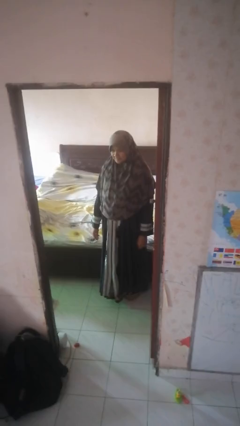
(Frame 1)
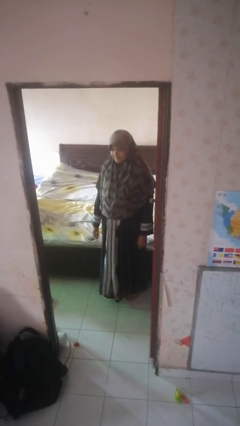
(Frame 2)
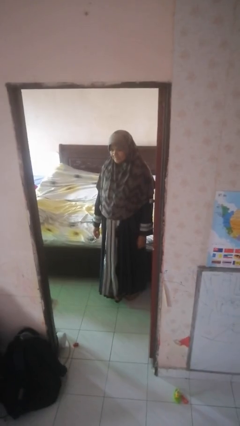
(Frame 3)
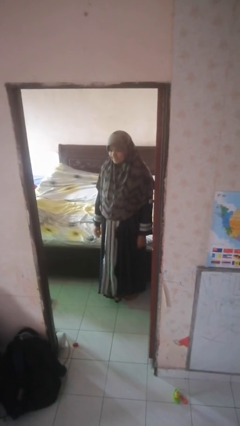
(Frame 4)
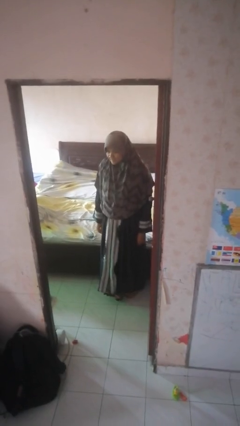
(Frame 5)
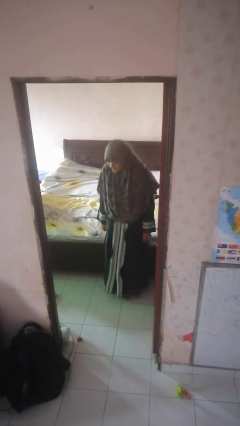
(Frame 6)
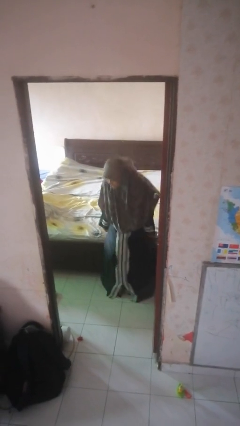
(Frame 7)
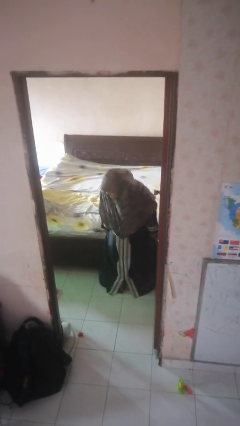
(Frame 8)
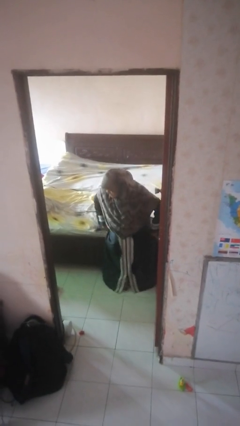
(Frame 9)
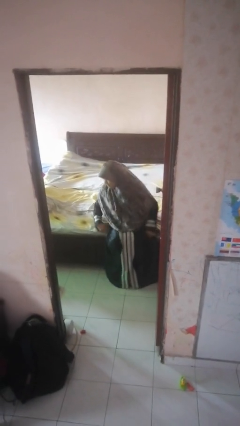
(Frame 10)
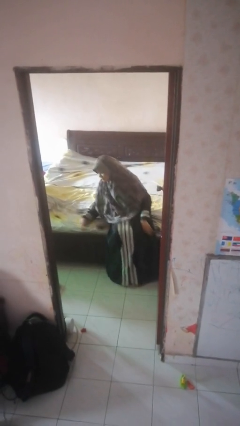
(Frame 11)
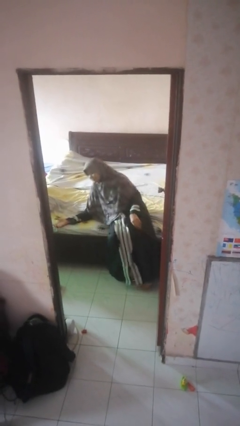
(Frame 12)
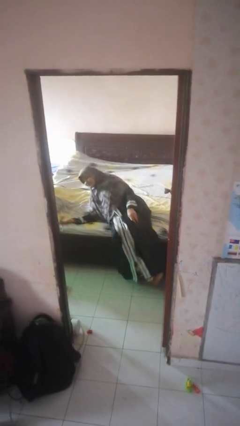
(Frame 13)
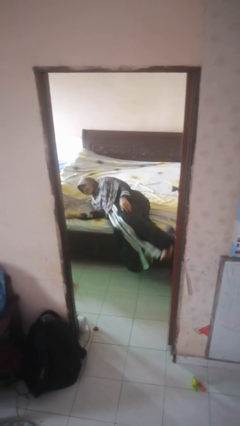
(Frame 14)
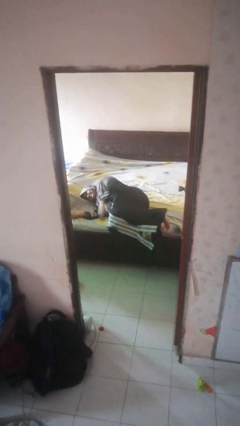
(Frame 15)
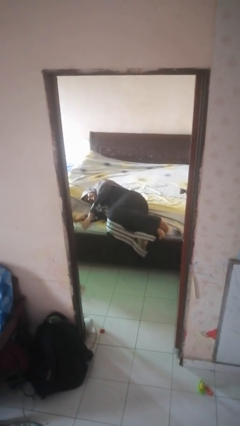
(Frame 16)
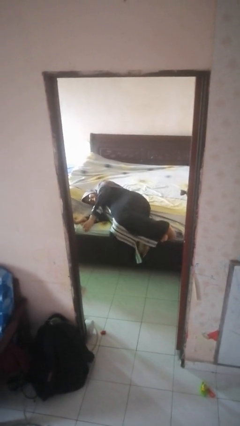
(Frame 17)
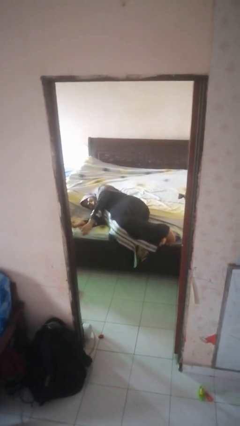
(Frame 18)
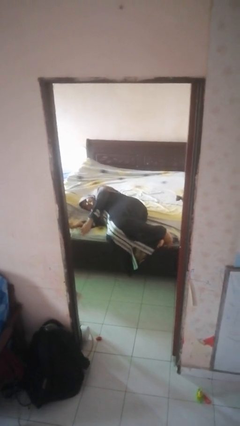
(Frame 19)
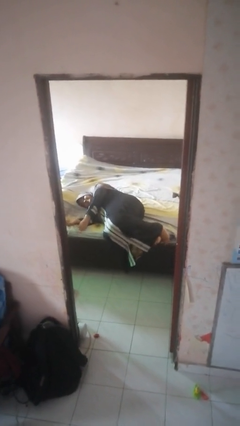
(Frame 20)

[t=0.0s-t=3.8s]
person lies down on bed

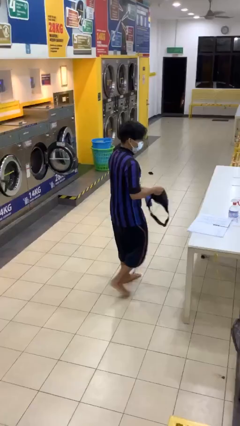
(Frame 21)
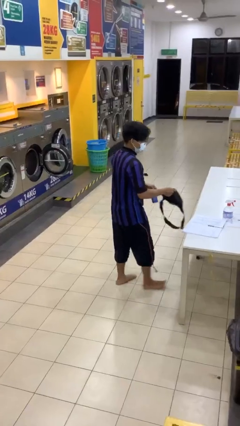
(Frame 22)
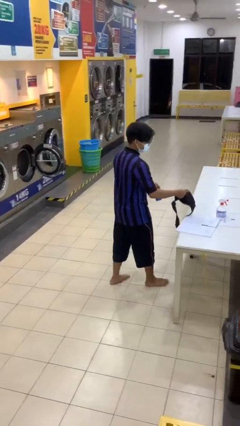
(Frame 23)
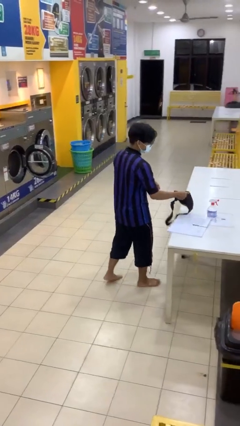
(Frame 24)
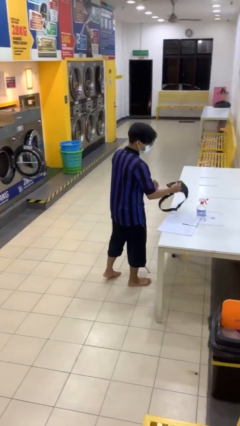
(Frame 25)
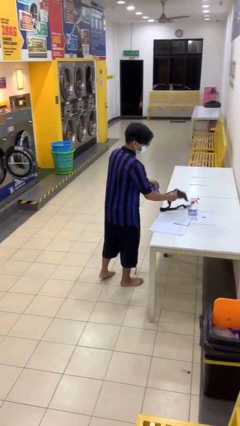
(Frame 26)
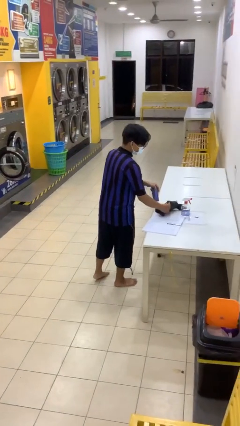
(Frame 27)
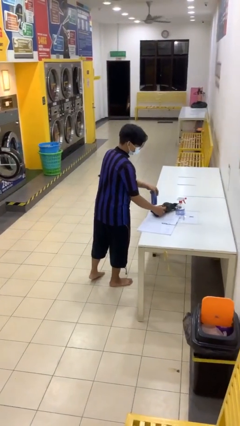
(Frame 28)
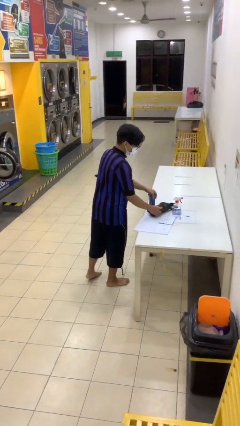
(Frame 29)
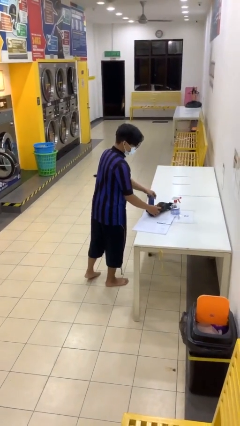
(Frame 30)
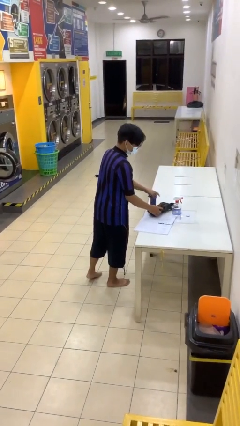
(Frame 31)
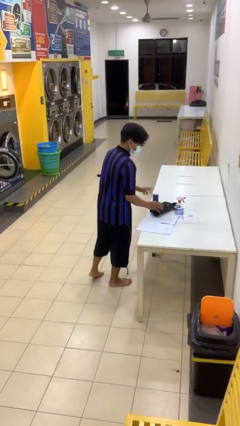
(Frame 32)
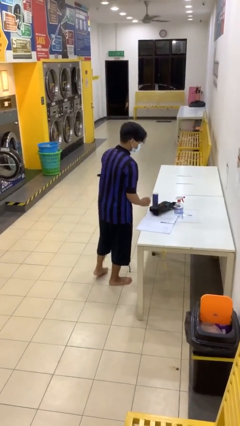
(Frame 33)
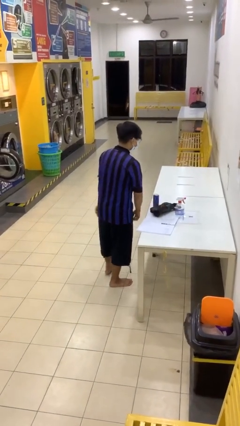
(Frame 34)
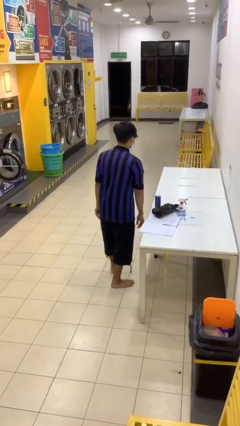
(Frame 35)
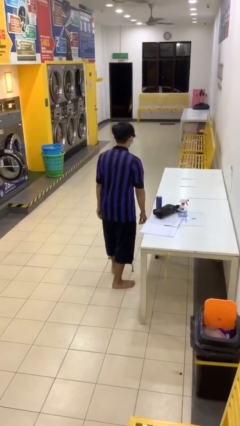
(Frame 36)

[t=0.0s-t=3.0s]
person puts down object on table

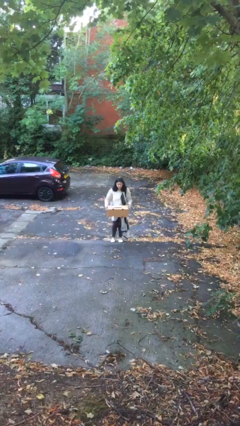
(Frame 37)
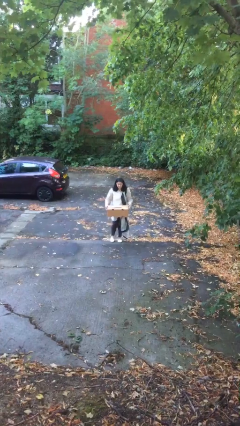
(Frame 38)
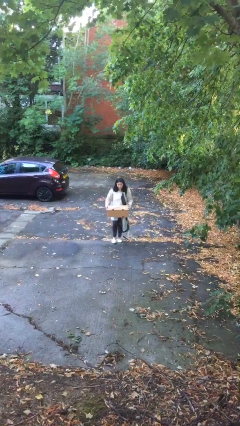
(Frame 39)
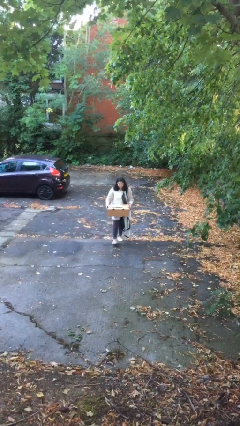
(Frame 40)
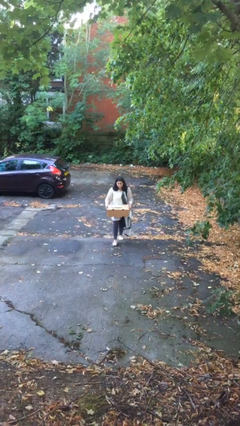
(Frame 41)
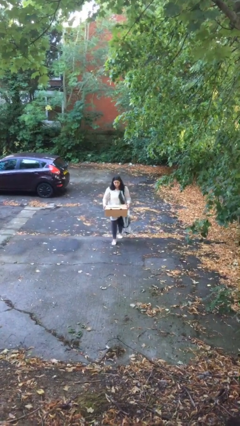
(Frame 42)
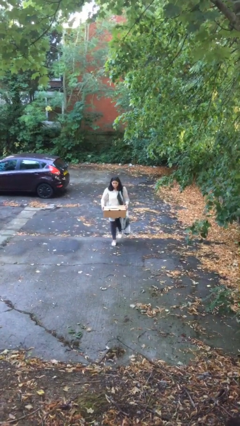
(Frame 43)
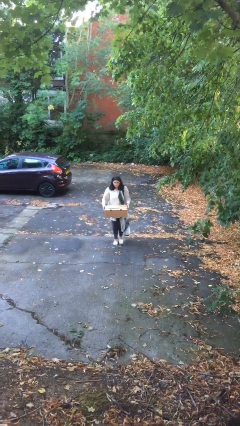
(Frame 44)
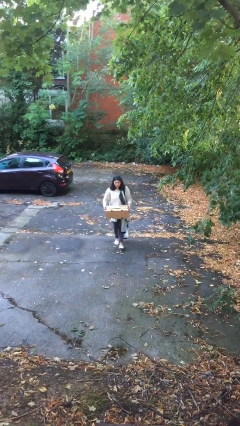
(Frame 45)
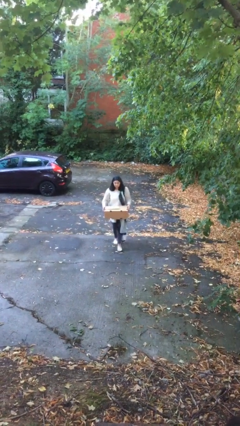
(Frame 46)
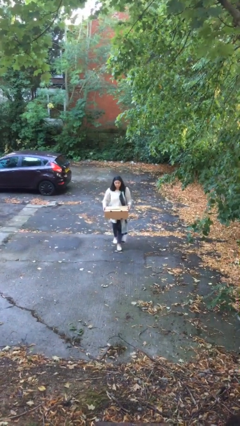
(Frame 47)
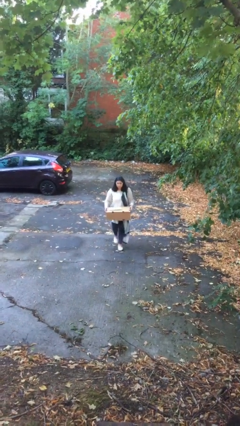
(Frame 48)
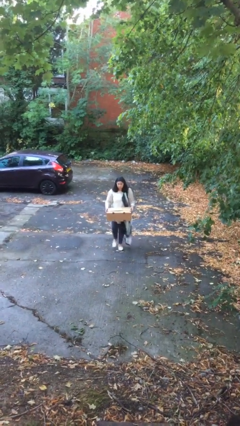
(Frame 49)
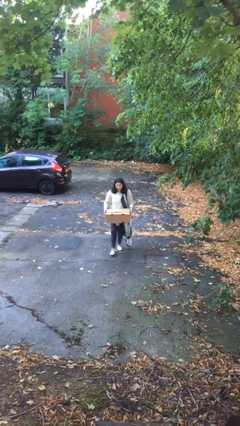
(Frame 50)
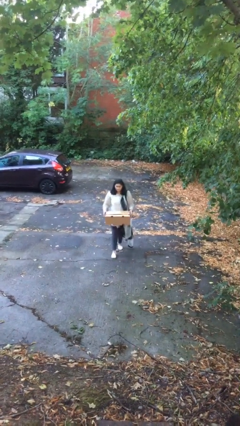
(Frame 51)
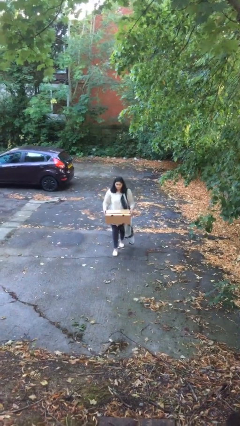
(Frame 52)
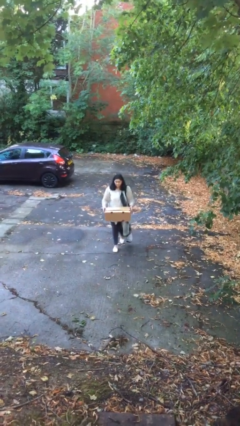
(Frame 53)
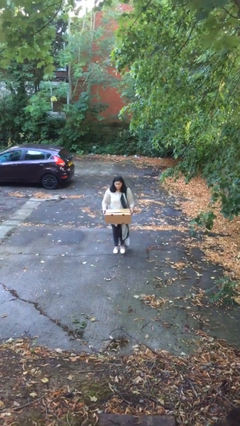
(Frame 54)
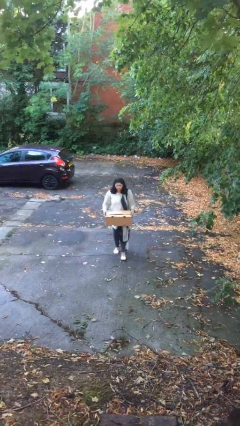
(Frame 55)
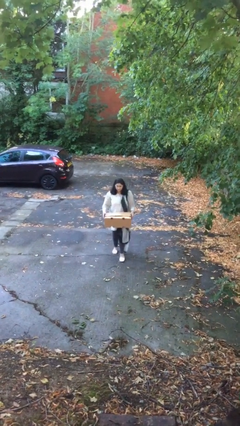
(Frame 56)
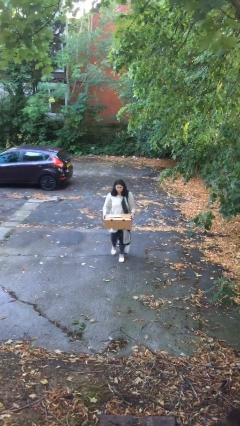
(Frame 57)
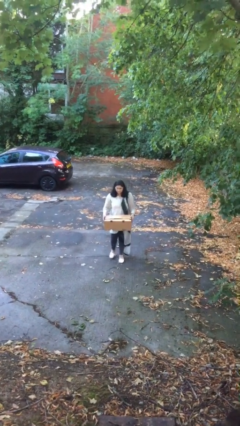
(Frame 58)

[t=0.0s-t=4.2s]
person carries heavy object

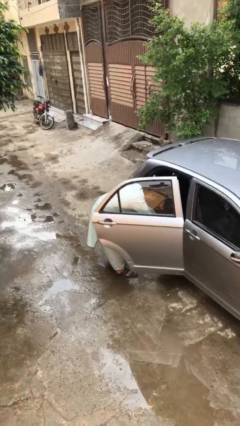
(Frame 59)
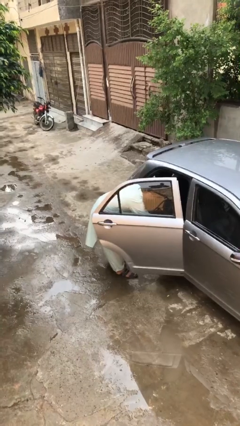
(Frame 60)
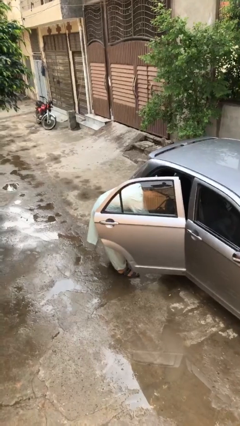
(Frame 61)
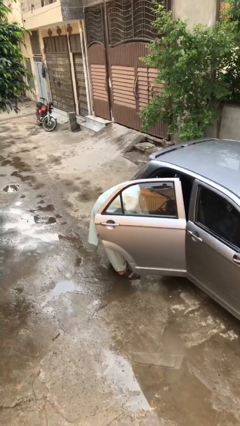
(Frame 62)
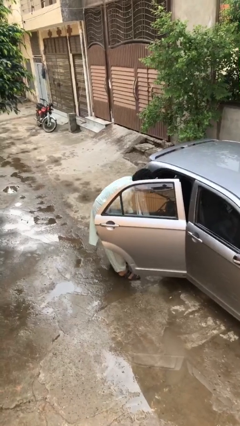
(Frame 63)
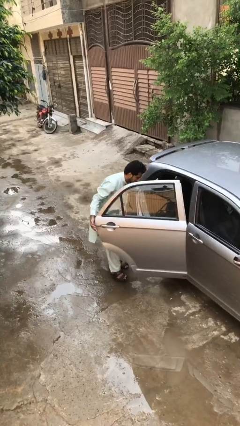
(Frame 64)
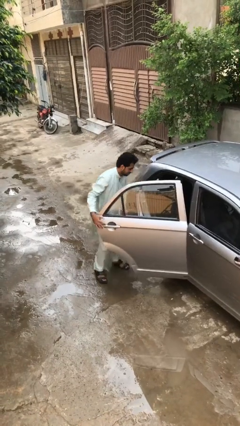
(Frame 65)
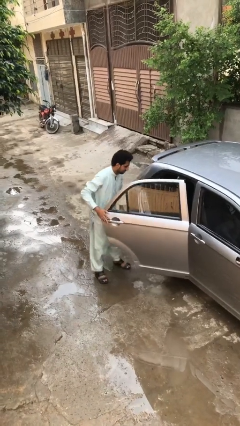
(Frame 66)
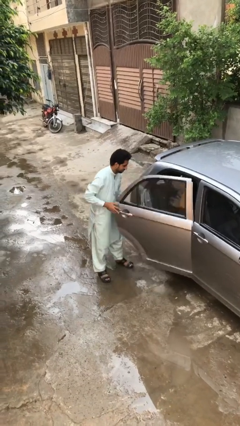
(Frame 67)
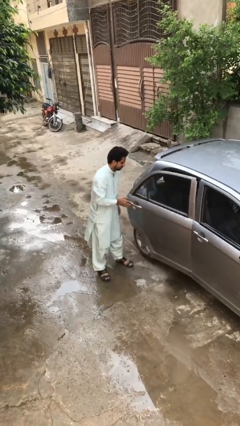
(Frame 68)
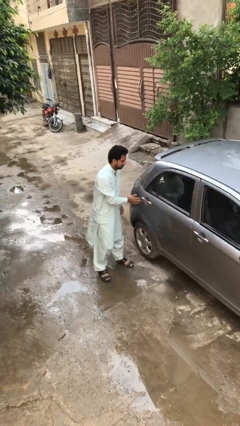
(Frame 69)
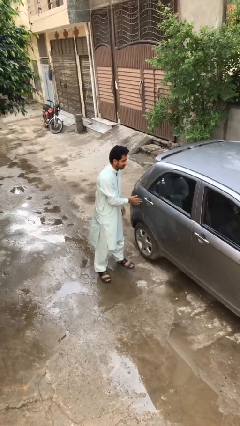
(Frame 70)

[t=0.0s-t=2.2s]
person closes car door

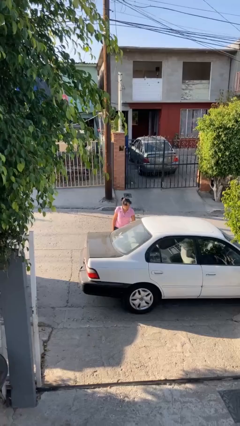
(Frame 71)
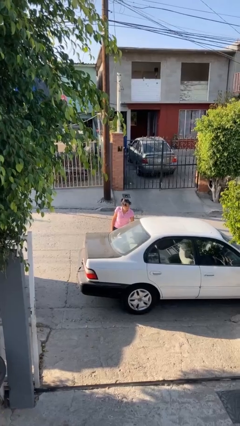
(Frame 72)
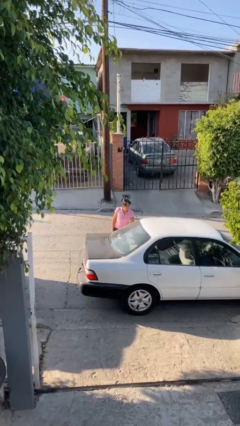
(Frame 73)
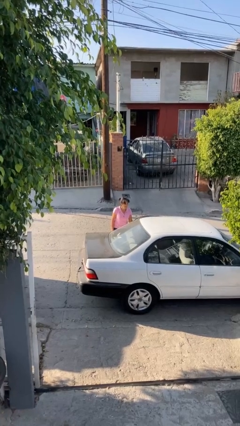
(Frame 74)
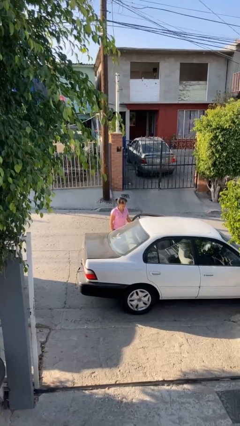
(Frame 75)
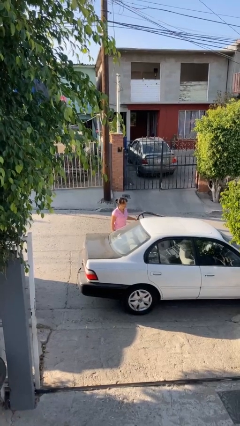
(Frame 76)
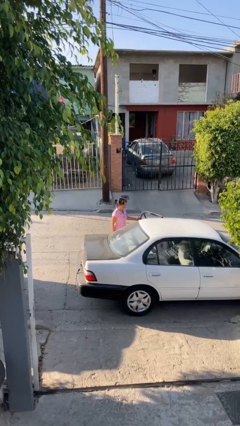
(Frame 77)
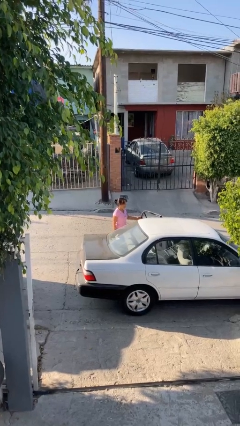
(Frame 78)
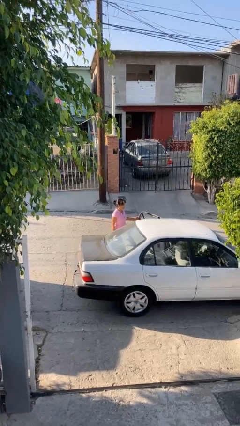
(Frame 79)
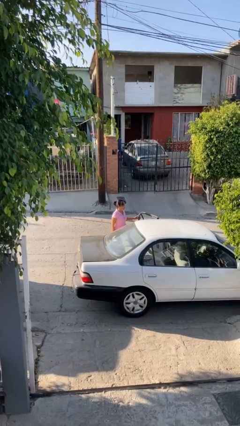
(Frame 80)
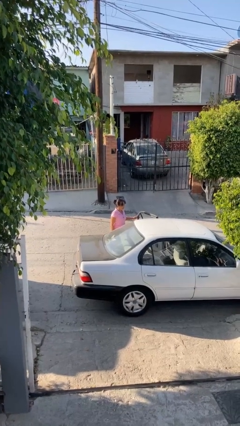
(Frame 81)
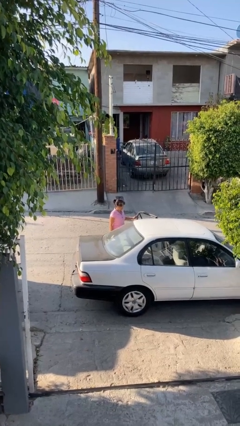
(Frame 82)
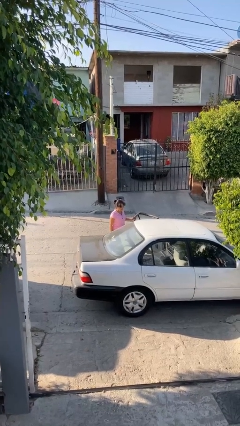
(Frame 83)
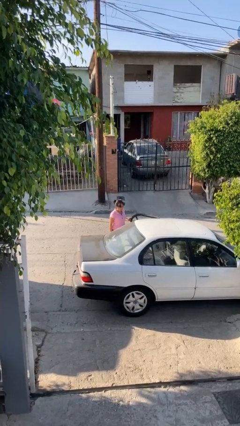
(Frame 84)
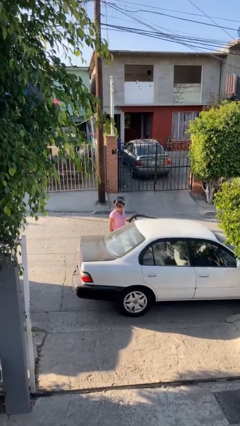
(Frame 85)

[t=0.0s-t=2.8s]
person opens car door

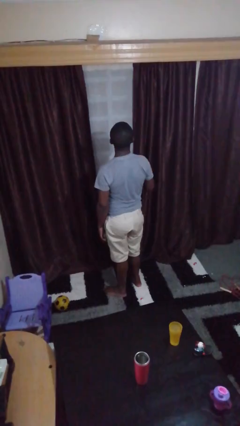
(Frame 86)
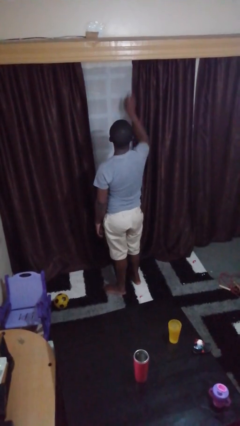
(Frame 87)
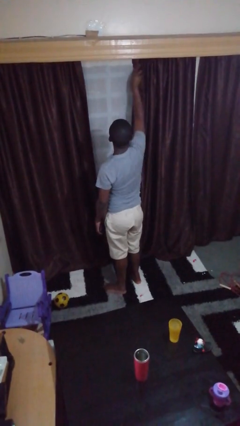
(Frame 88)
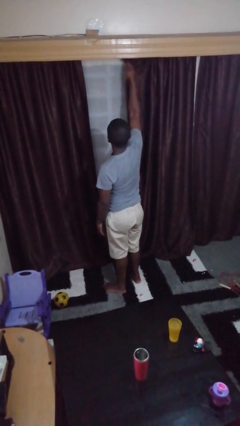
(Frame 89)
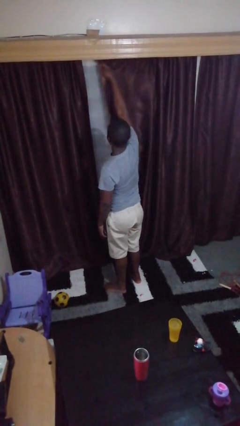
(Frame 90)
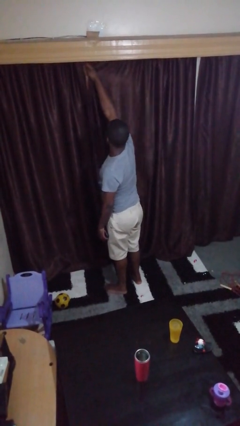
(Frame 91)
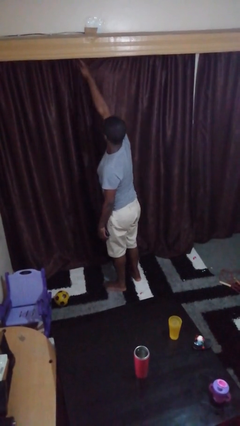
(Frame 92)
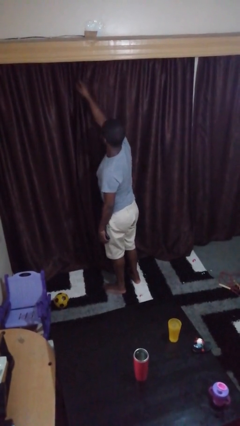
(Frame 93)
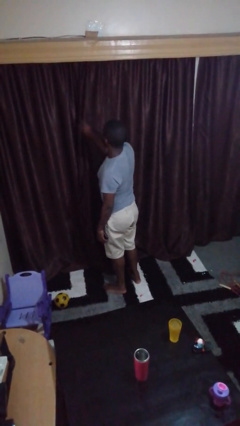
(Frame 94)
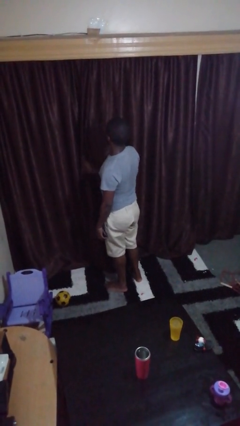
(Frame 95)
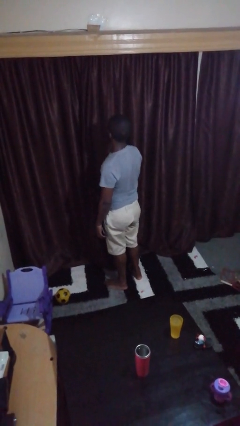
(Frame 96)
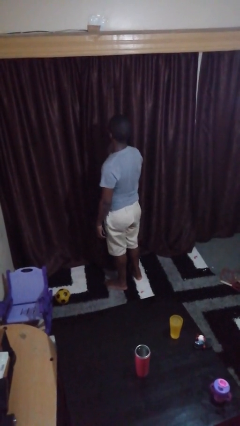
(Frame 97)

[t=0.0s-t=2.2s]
person closes curtains
